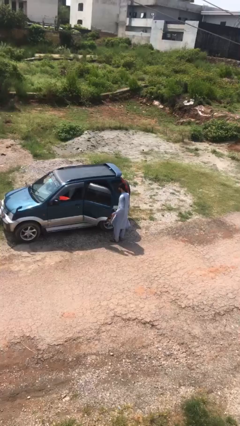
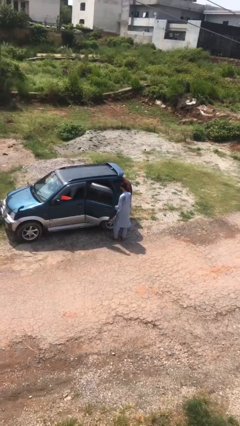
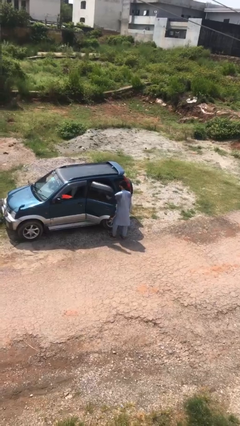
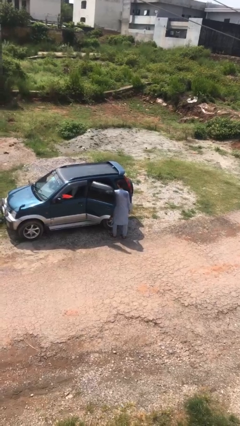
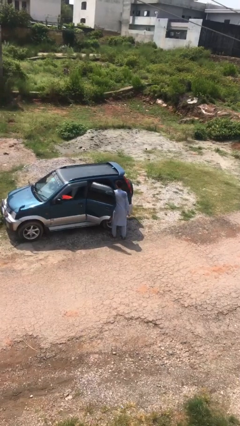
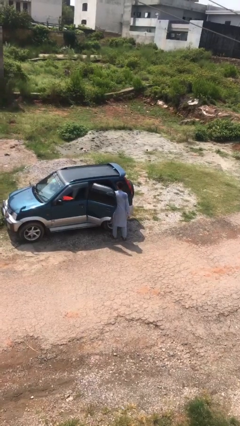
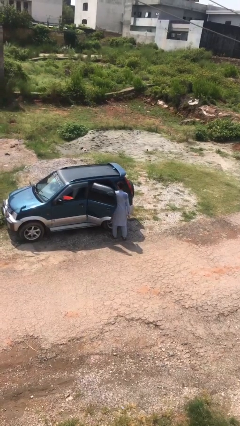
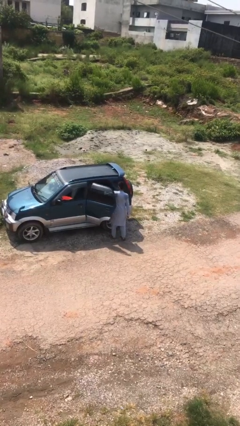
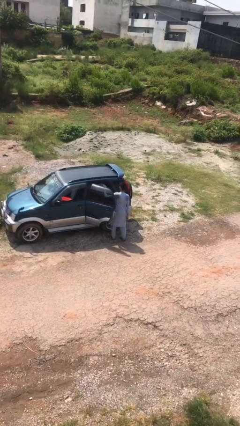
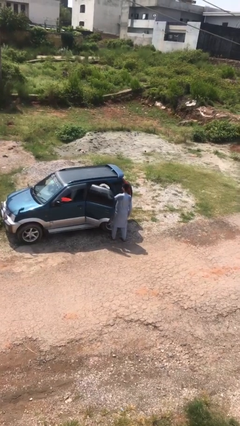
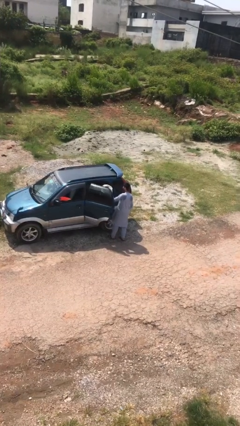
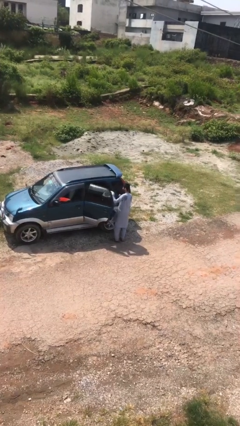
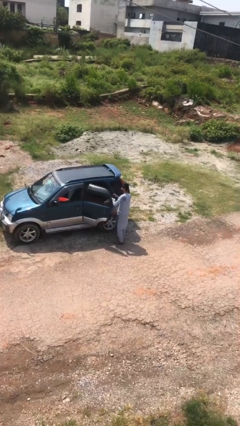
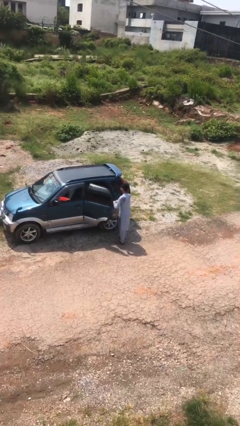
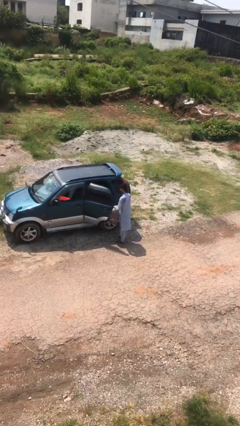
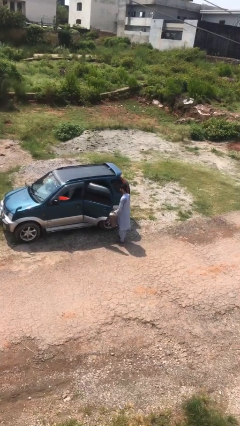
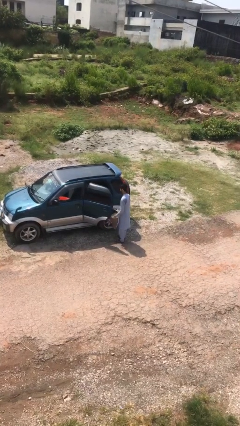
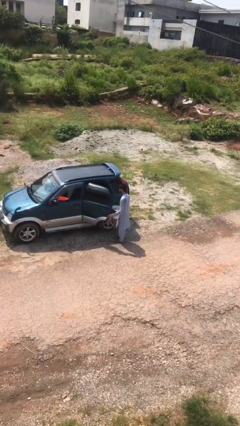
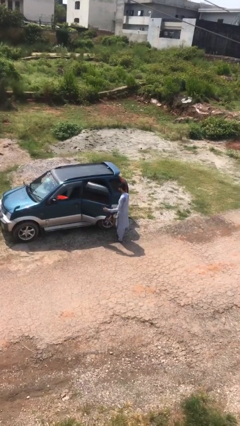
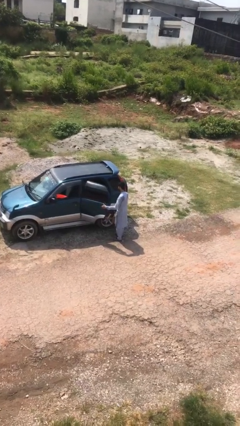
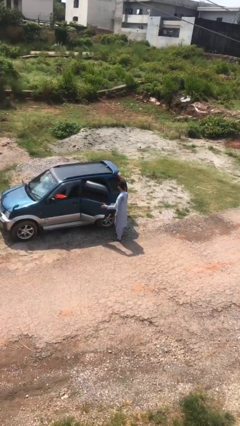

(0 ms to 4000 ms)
person unloads car

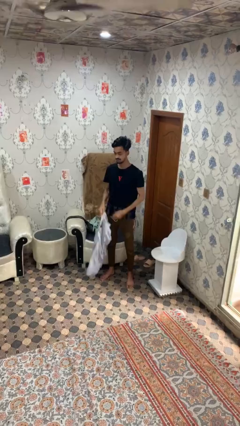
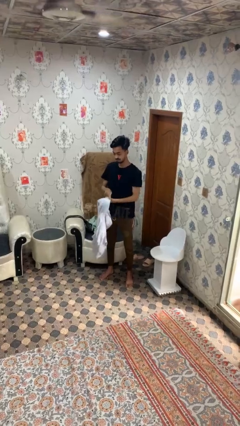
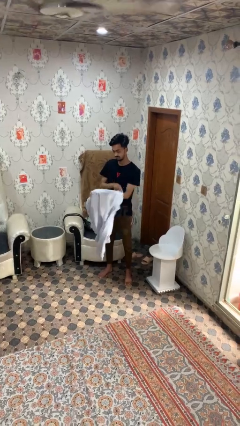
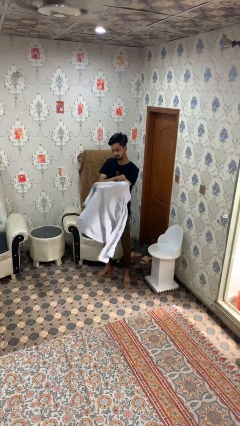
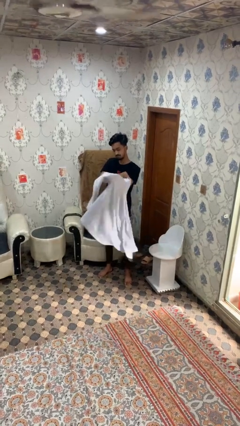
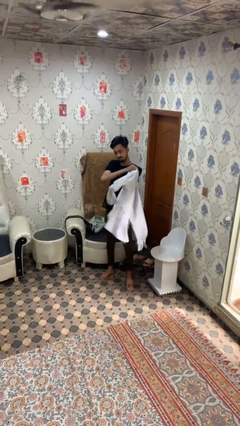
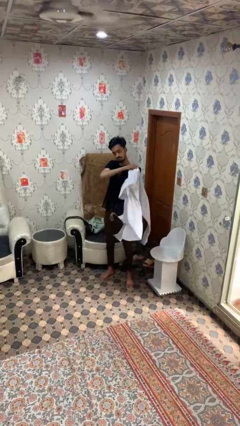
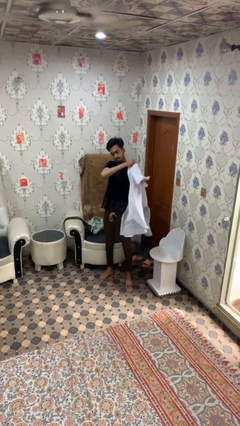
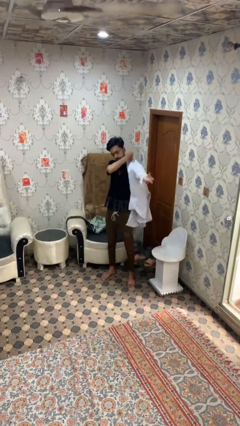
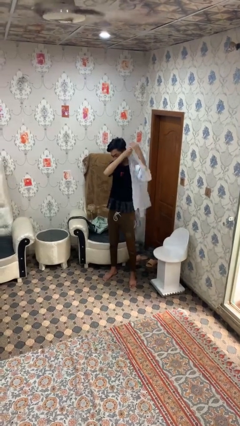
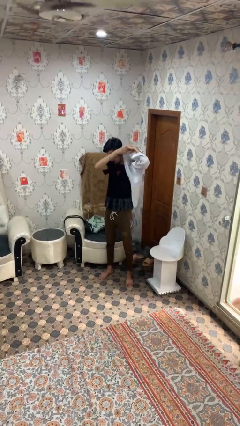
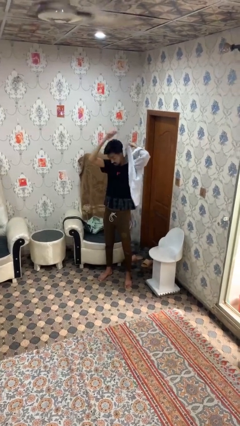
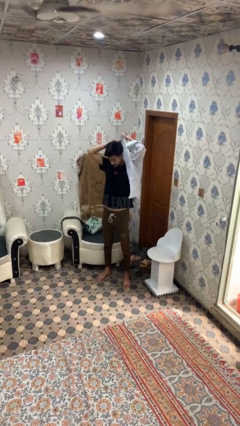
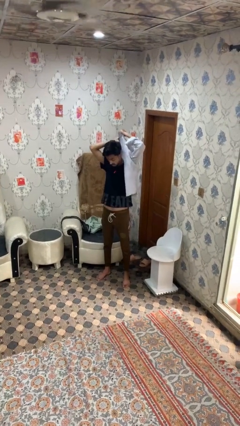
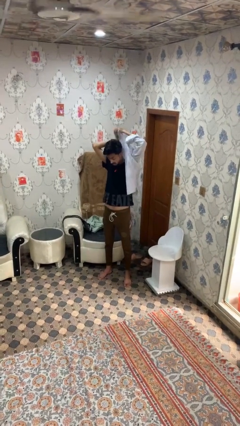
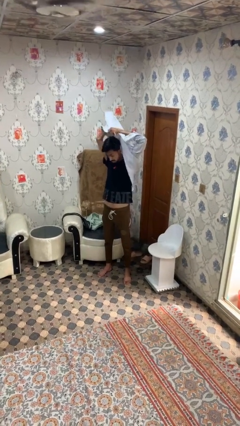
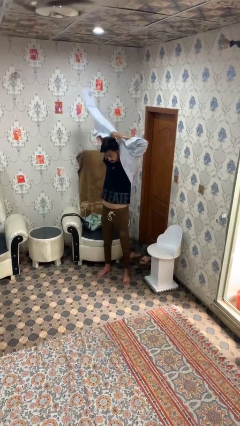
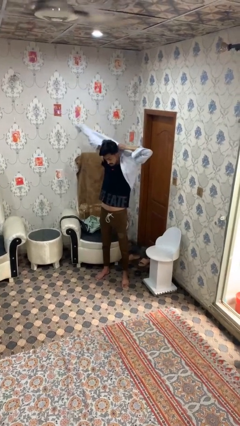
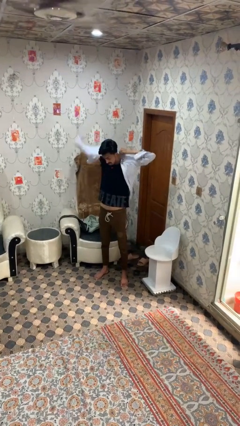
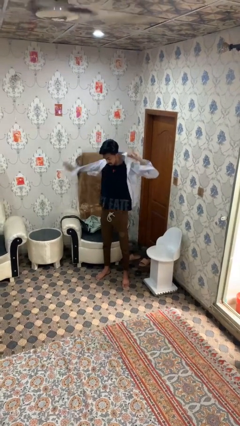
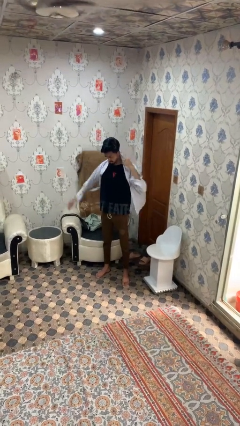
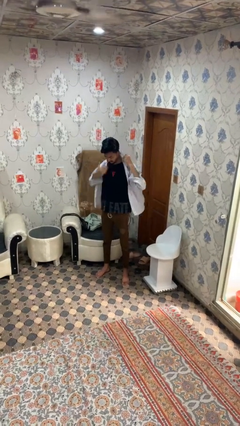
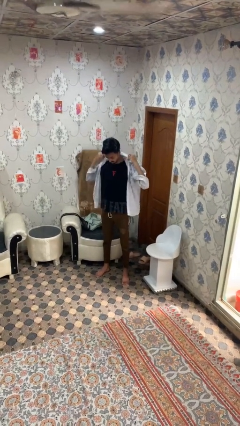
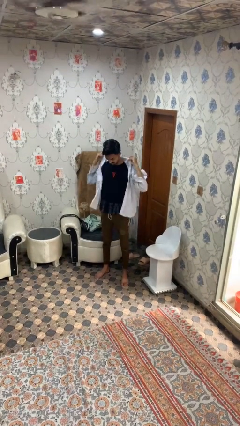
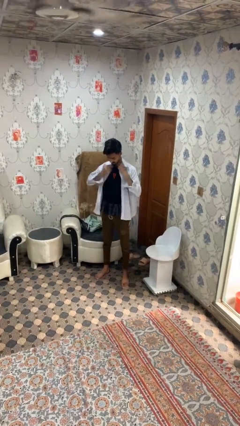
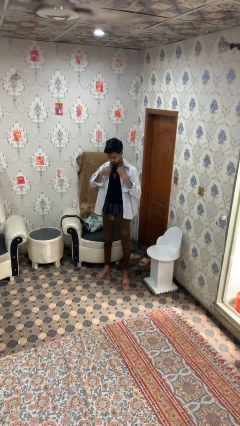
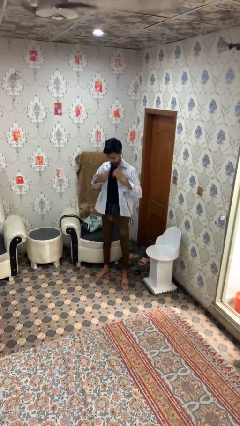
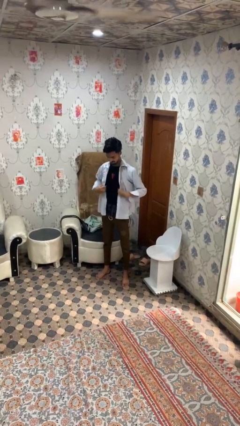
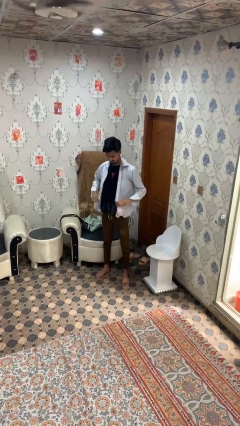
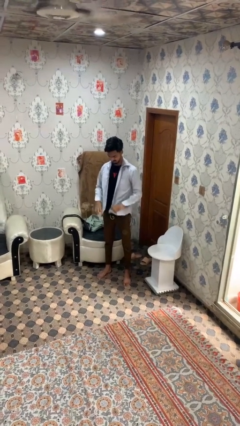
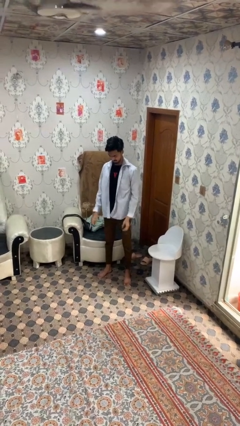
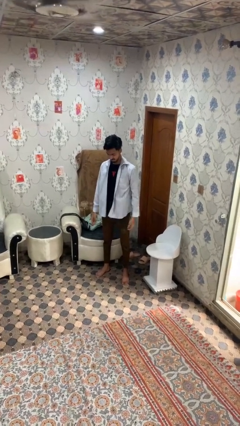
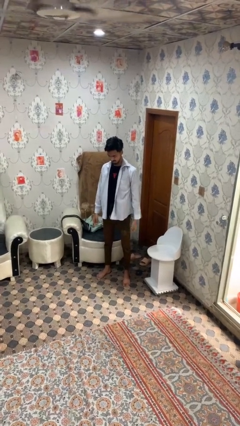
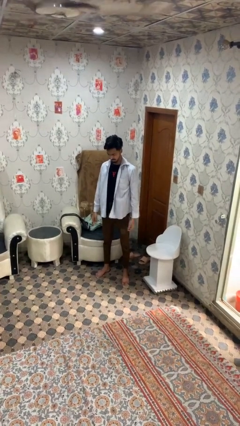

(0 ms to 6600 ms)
person puts on shirt

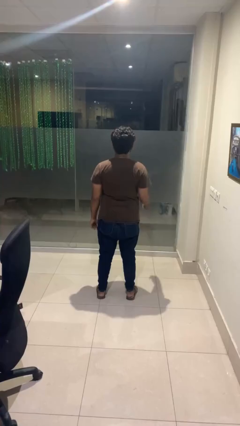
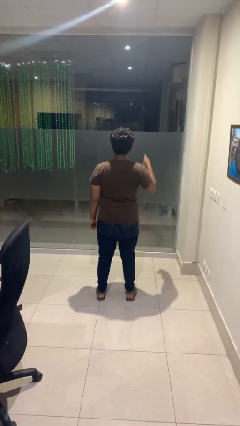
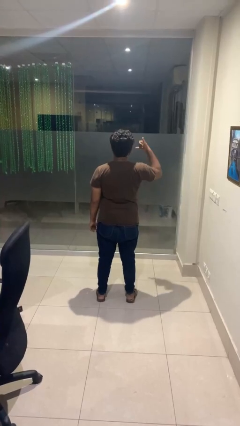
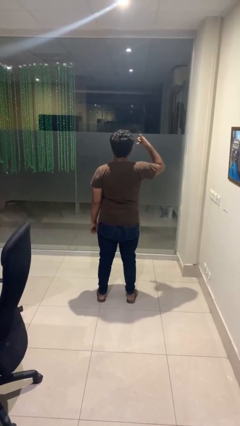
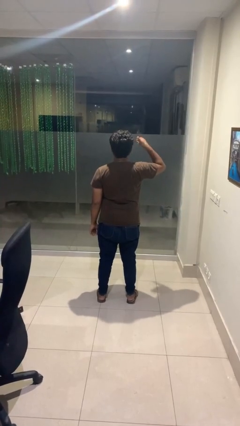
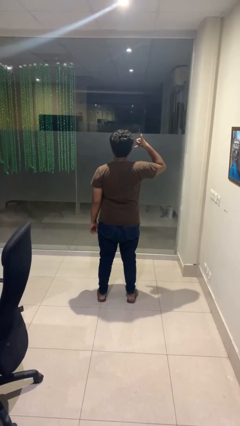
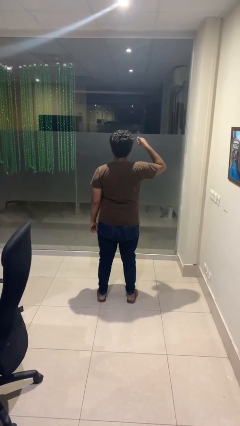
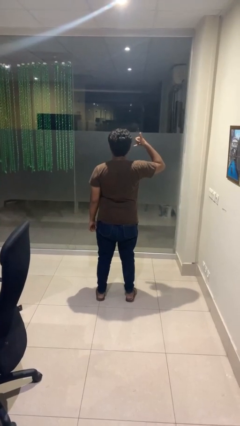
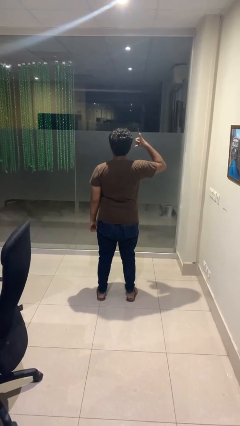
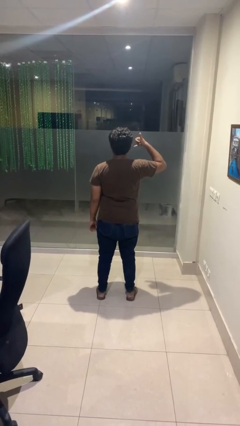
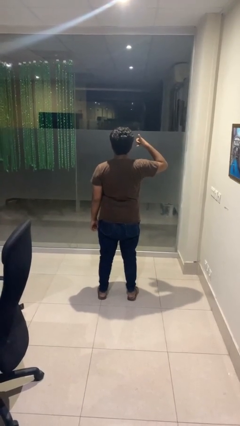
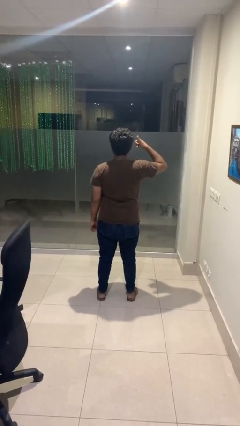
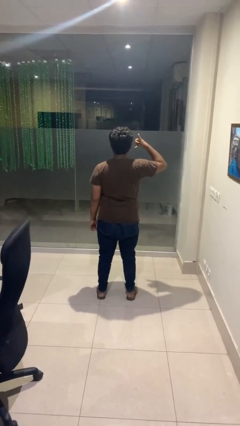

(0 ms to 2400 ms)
person gestures hang loose

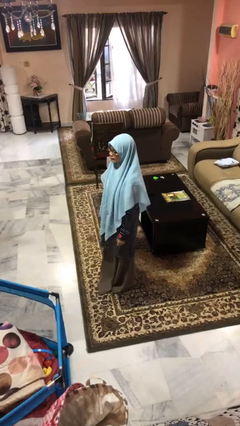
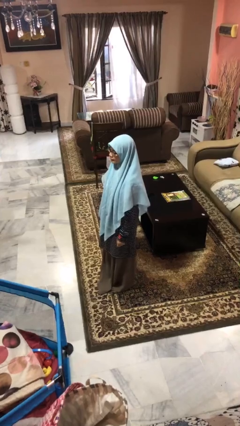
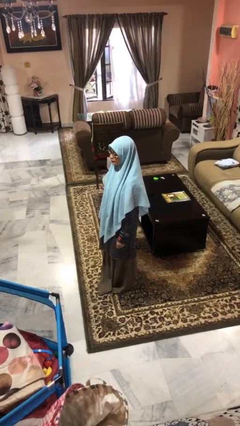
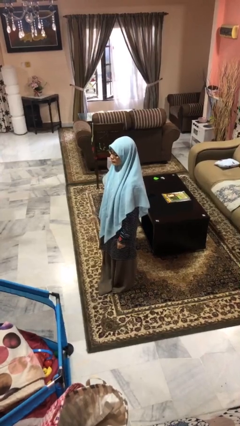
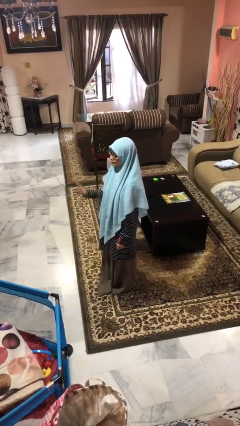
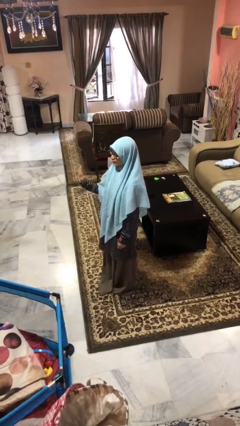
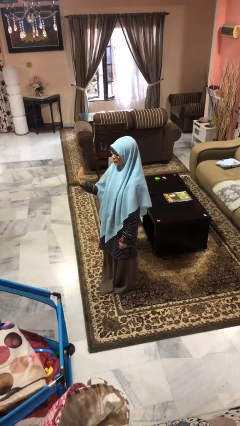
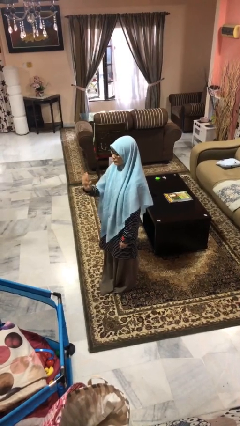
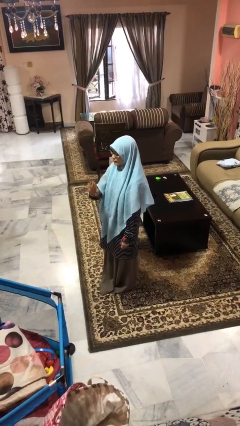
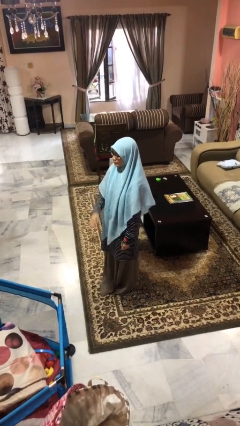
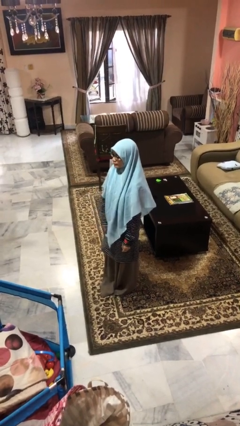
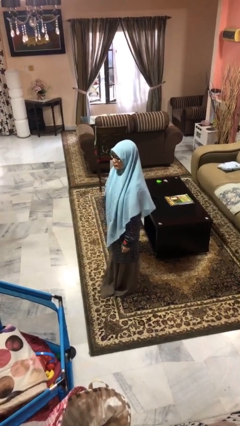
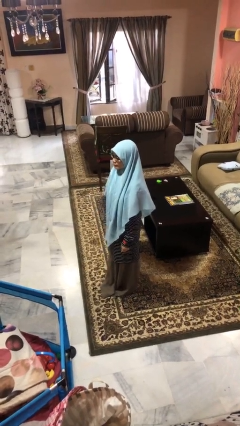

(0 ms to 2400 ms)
person gestures swipe left

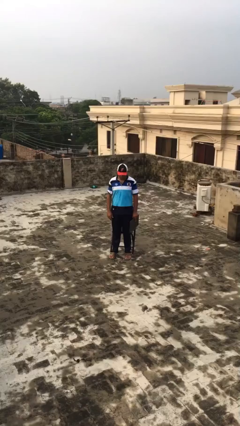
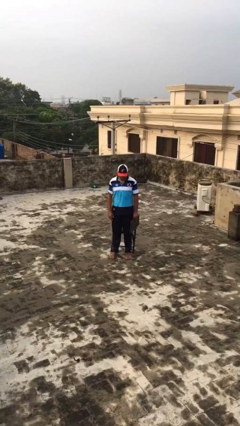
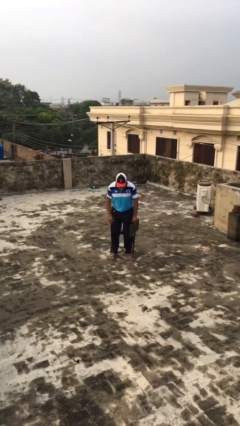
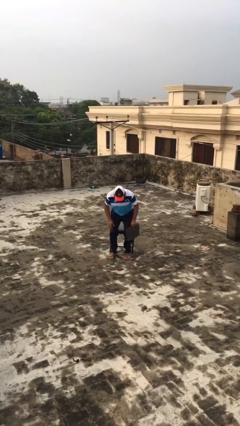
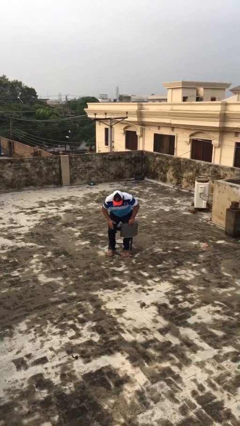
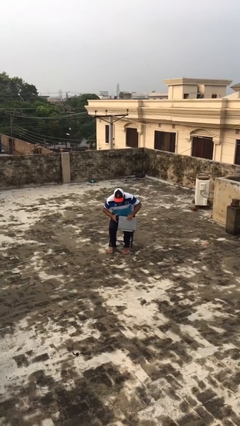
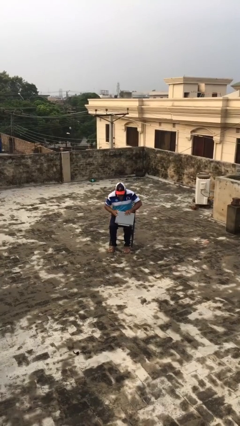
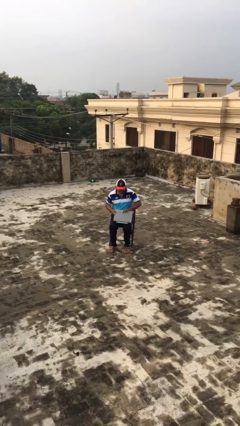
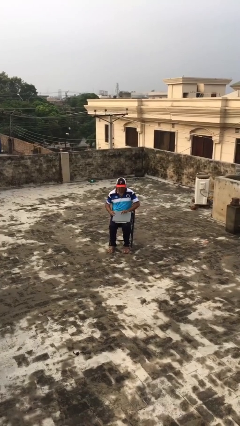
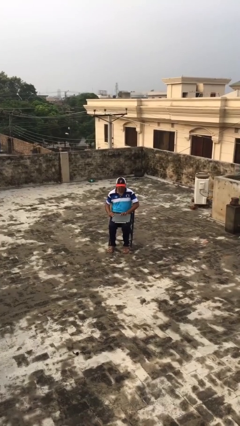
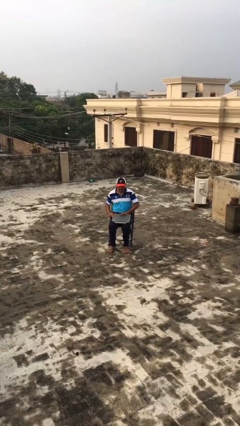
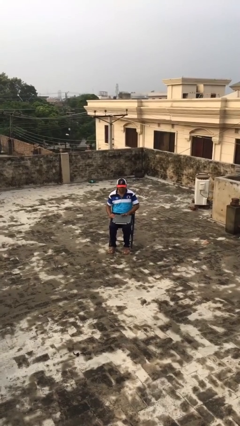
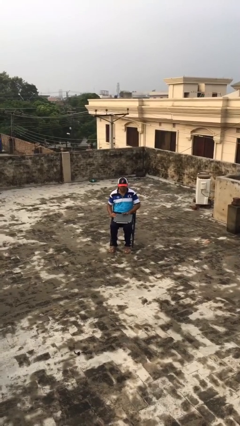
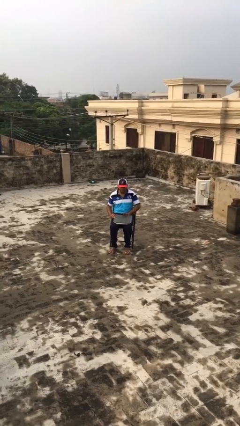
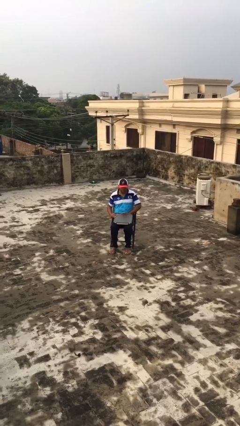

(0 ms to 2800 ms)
person sits down
